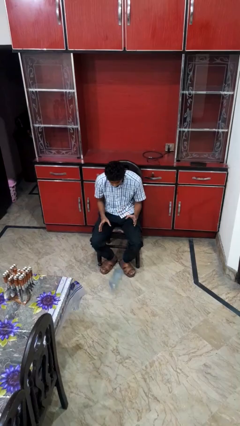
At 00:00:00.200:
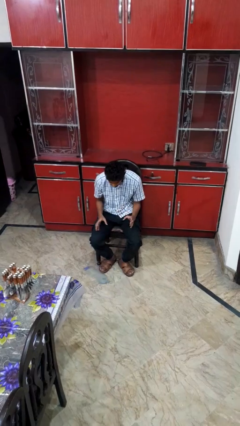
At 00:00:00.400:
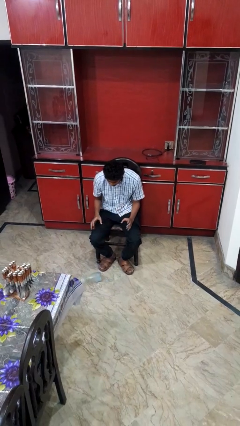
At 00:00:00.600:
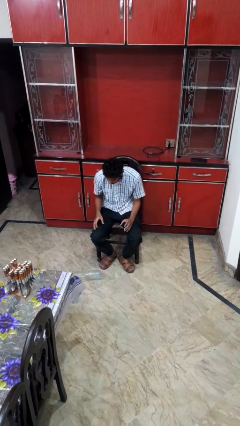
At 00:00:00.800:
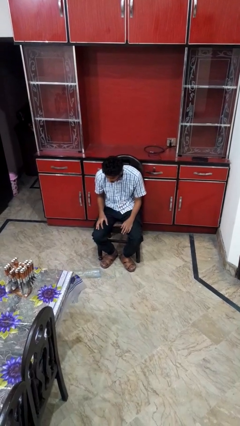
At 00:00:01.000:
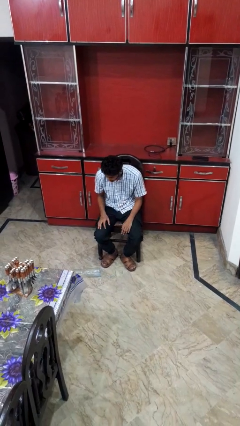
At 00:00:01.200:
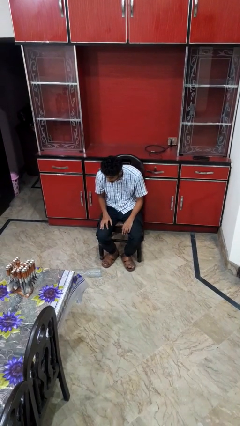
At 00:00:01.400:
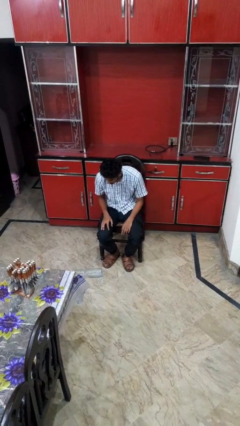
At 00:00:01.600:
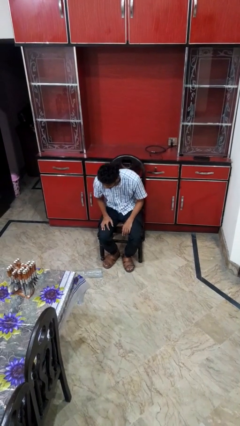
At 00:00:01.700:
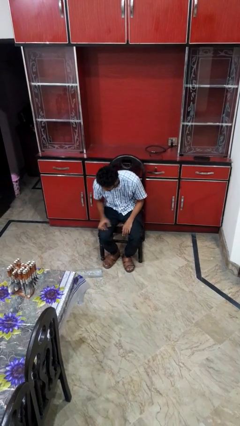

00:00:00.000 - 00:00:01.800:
person drops object

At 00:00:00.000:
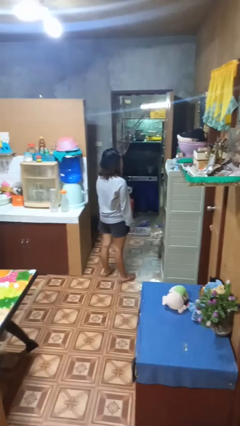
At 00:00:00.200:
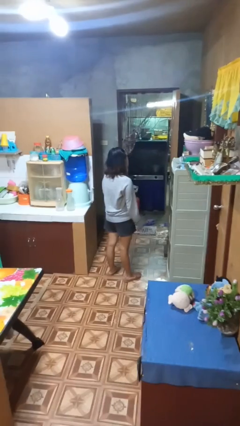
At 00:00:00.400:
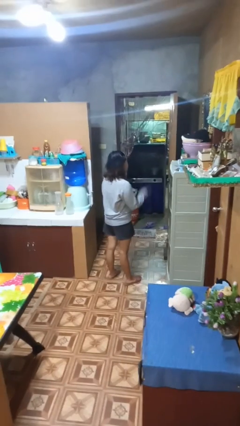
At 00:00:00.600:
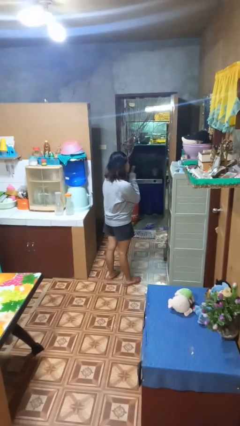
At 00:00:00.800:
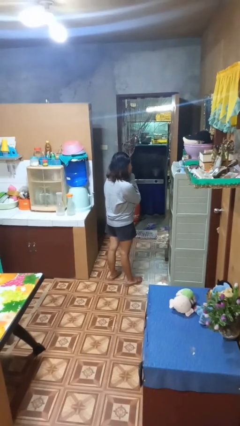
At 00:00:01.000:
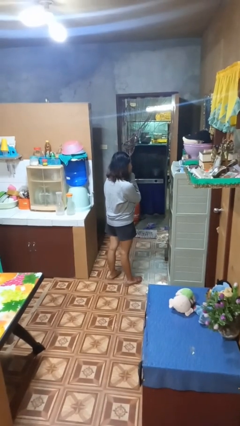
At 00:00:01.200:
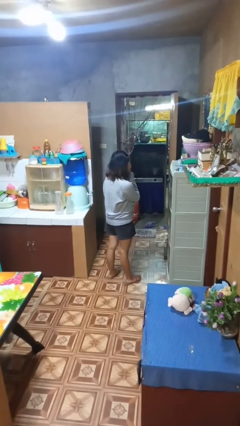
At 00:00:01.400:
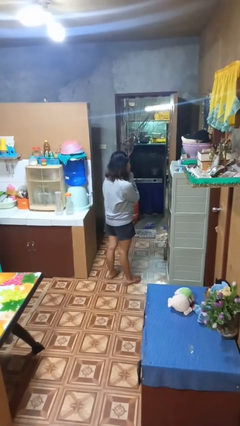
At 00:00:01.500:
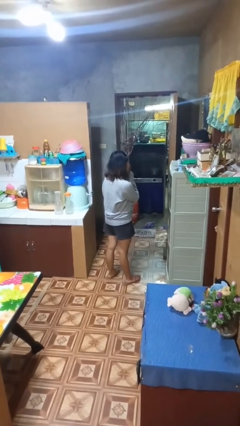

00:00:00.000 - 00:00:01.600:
person gestures be quiet

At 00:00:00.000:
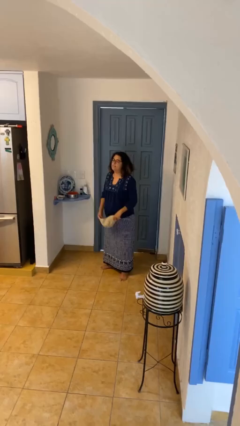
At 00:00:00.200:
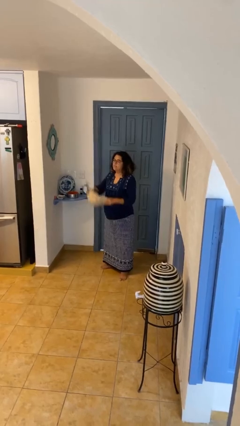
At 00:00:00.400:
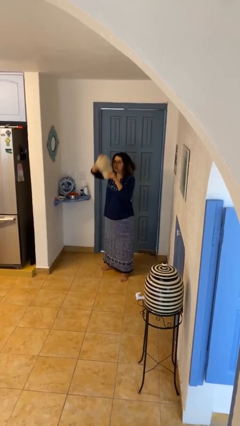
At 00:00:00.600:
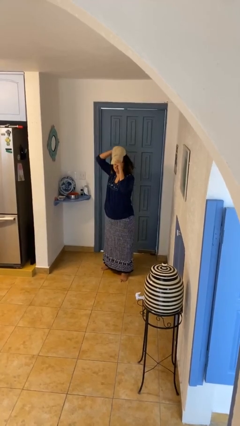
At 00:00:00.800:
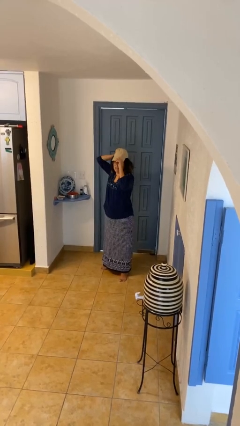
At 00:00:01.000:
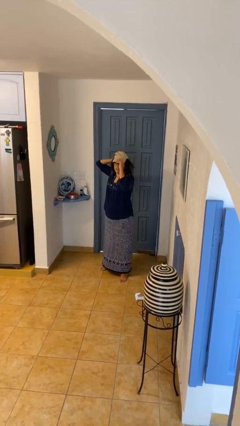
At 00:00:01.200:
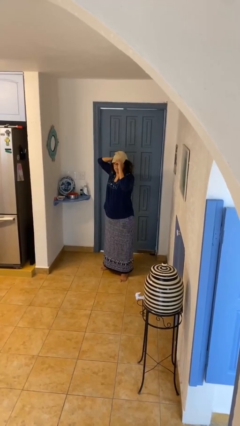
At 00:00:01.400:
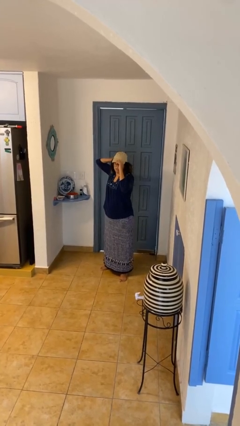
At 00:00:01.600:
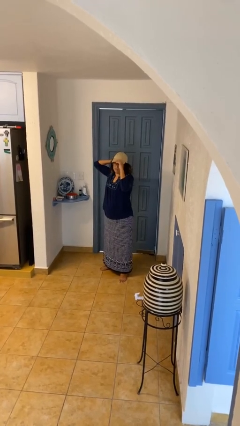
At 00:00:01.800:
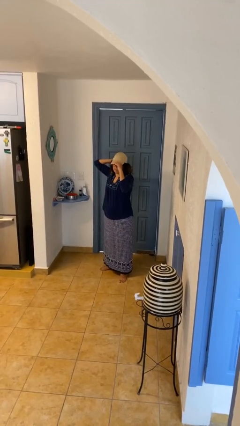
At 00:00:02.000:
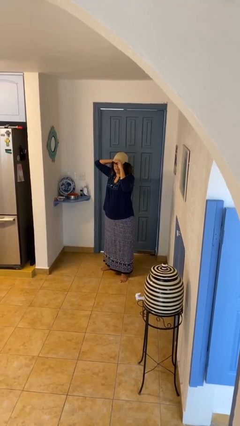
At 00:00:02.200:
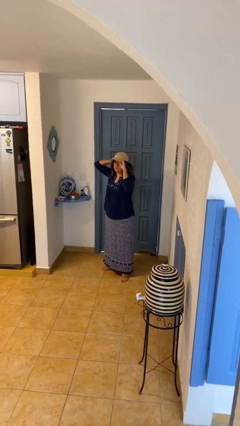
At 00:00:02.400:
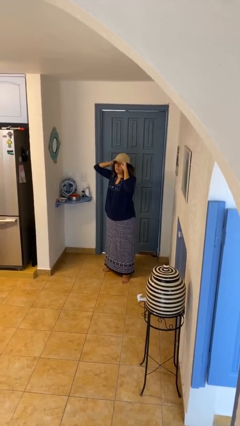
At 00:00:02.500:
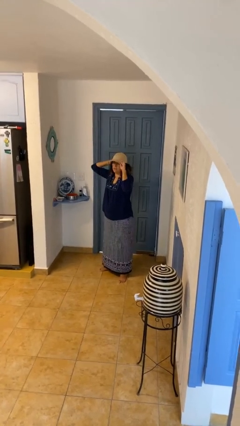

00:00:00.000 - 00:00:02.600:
person puts on hat

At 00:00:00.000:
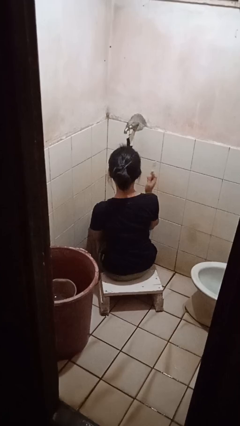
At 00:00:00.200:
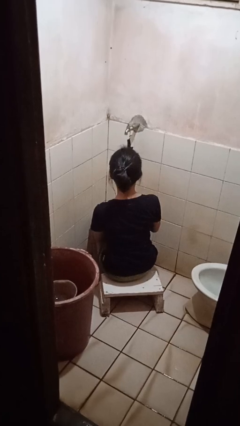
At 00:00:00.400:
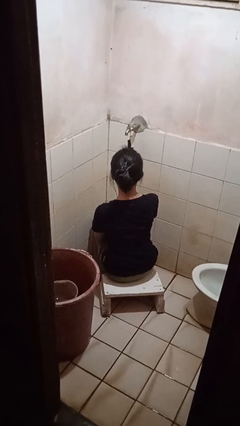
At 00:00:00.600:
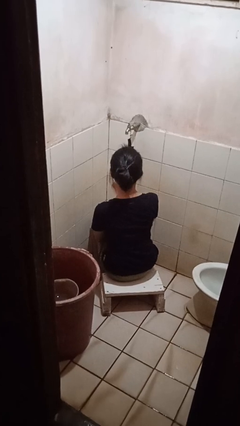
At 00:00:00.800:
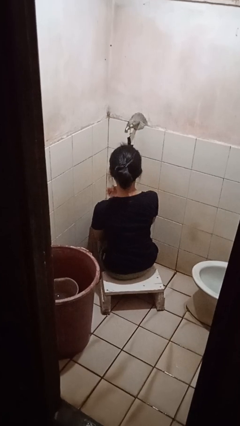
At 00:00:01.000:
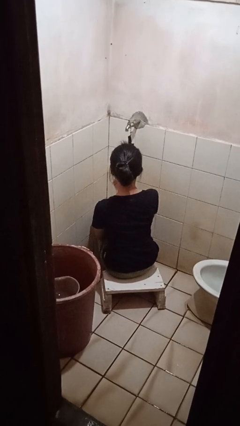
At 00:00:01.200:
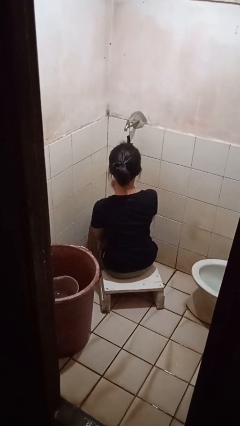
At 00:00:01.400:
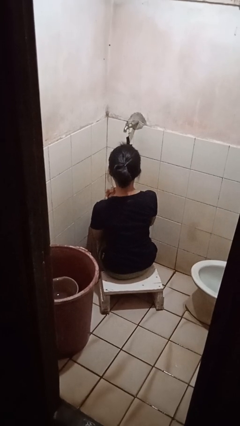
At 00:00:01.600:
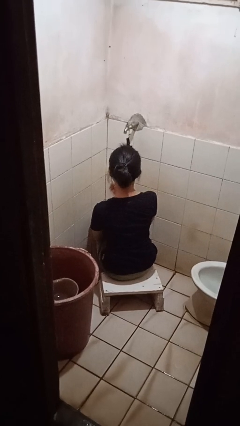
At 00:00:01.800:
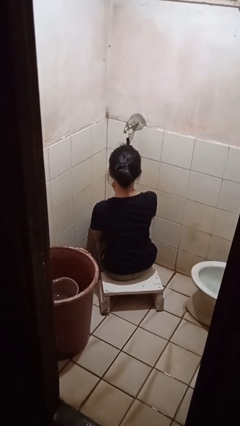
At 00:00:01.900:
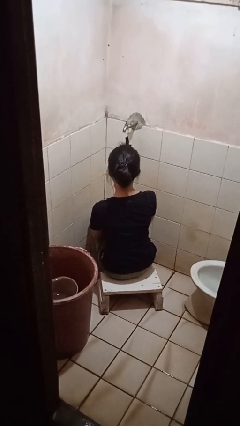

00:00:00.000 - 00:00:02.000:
person brushes teeth

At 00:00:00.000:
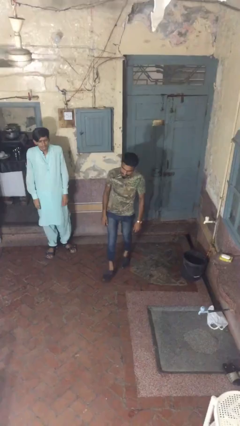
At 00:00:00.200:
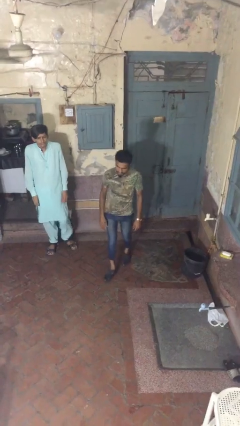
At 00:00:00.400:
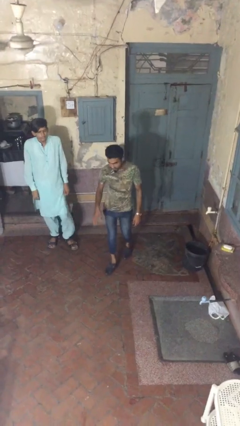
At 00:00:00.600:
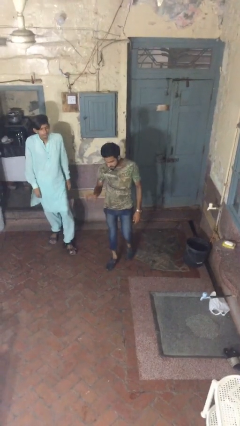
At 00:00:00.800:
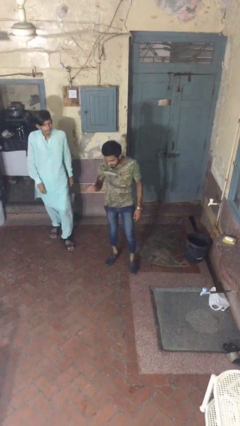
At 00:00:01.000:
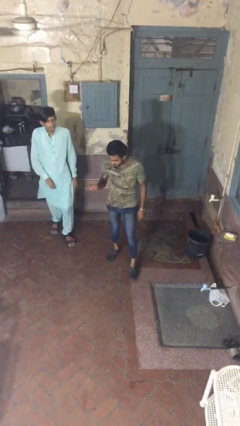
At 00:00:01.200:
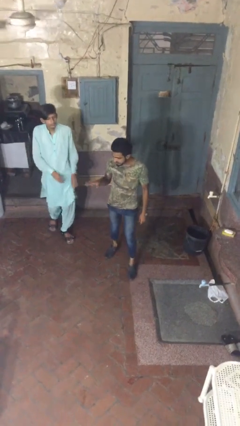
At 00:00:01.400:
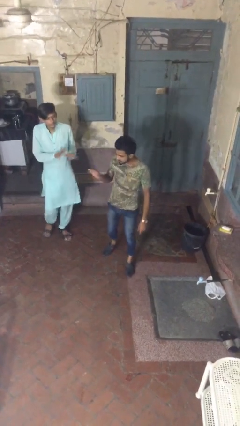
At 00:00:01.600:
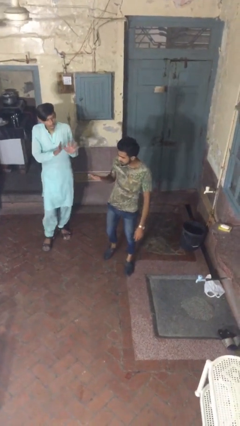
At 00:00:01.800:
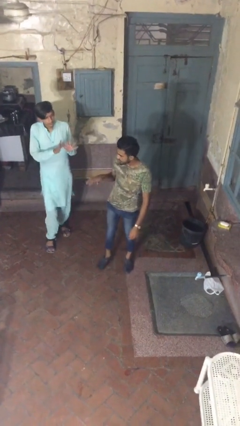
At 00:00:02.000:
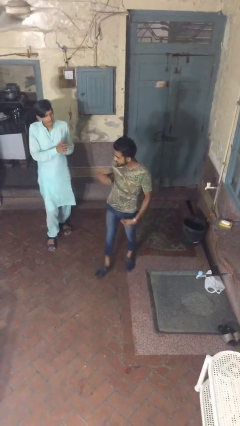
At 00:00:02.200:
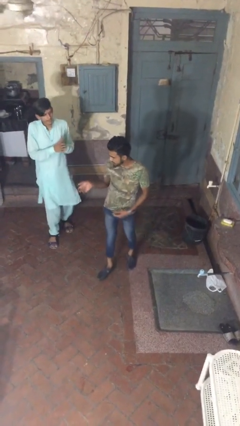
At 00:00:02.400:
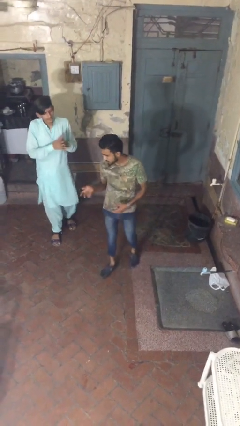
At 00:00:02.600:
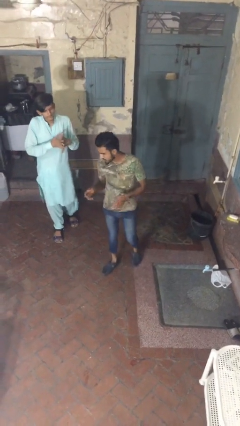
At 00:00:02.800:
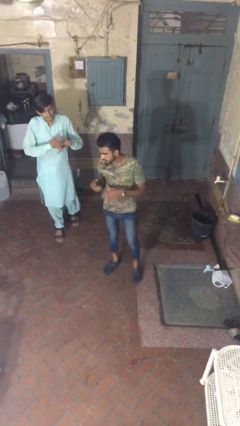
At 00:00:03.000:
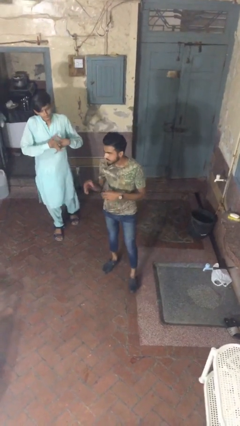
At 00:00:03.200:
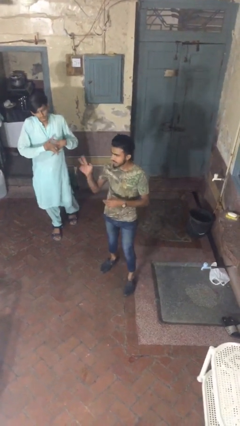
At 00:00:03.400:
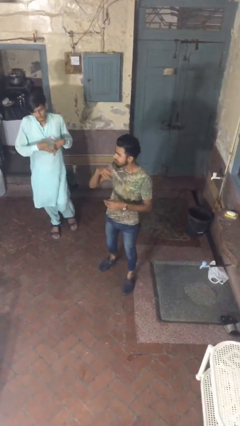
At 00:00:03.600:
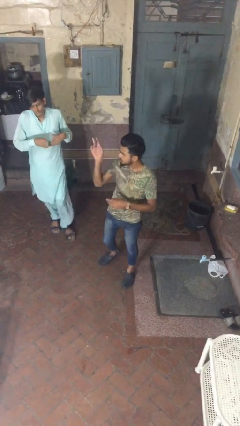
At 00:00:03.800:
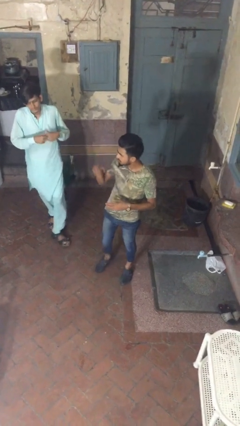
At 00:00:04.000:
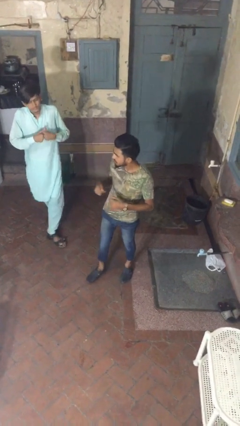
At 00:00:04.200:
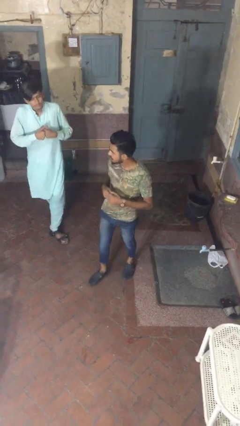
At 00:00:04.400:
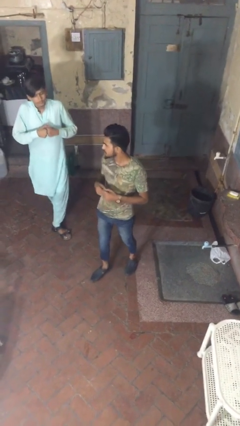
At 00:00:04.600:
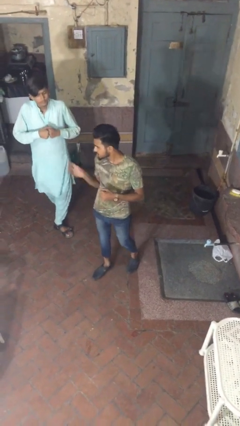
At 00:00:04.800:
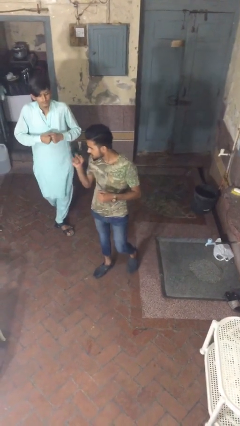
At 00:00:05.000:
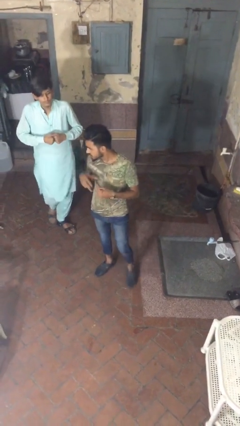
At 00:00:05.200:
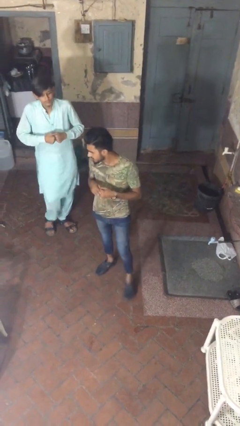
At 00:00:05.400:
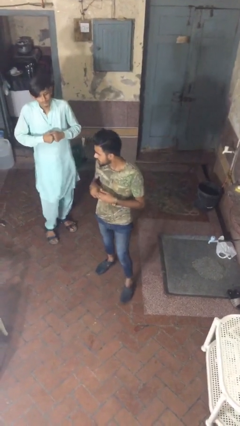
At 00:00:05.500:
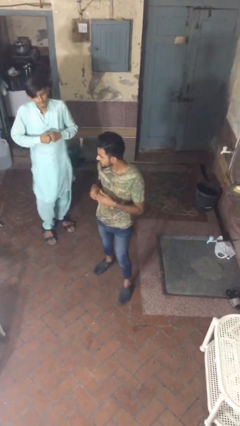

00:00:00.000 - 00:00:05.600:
person talks to person

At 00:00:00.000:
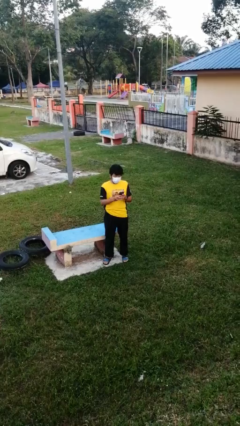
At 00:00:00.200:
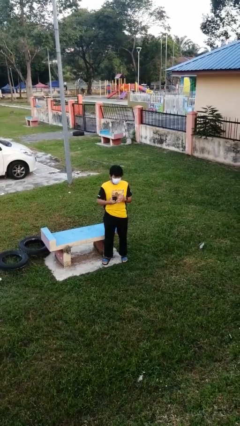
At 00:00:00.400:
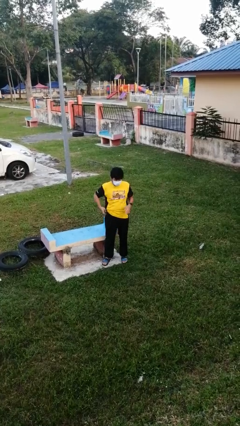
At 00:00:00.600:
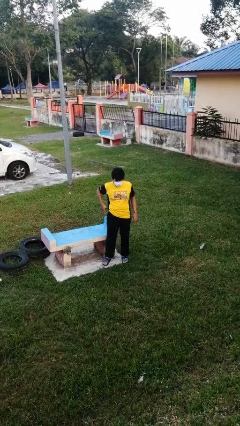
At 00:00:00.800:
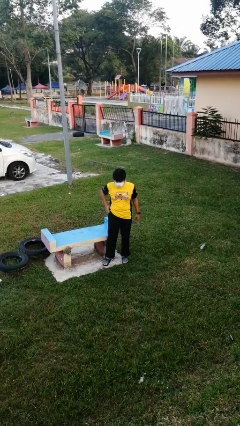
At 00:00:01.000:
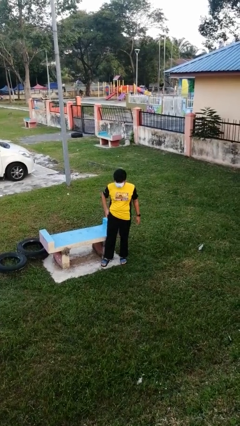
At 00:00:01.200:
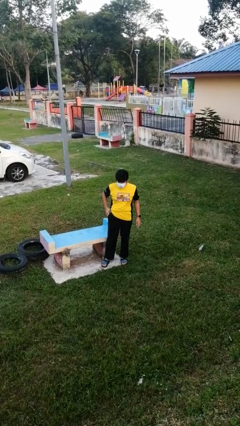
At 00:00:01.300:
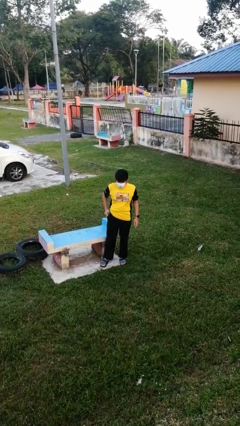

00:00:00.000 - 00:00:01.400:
person puts phone into pocket

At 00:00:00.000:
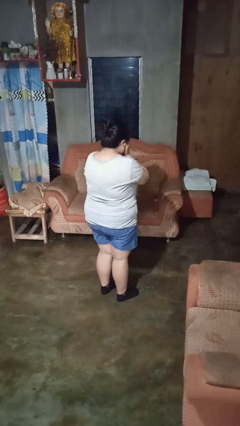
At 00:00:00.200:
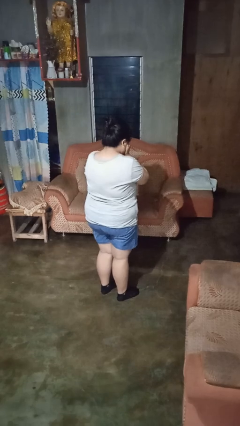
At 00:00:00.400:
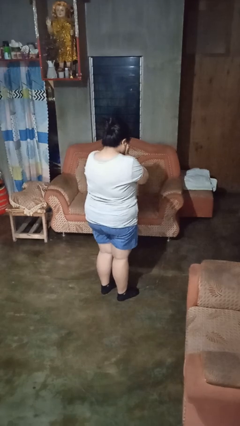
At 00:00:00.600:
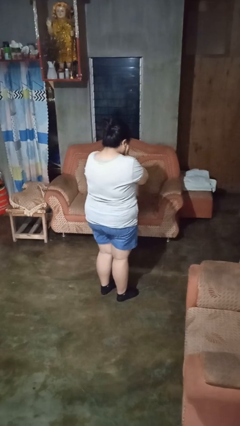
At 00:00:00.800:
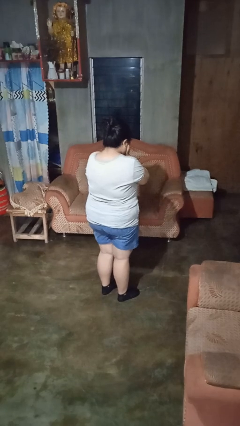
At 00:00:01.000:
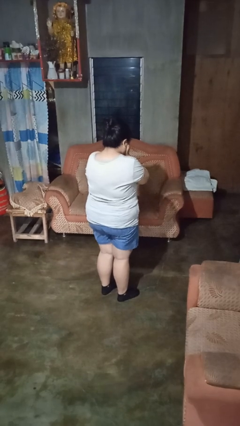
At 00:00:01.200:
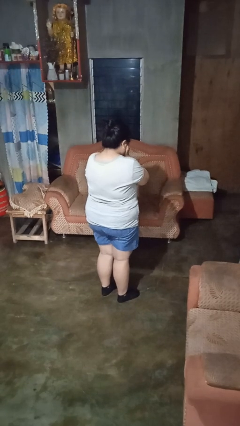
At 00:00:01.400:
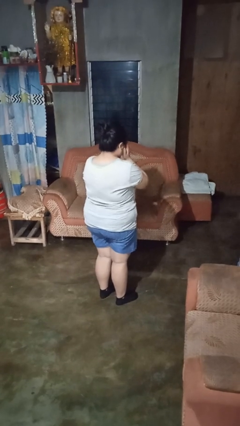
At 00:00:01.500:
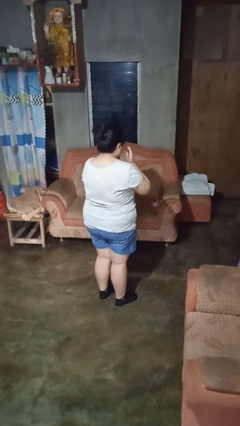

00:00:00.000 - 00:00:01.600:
person covers face with hands

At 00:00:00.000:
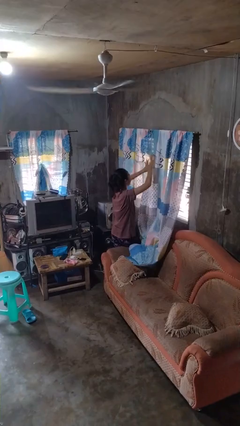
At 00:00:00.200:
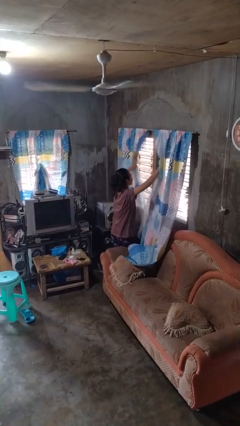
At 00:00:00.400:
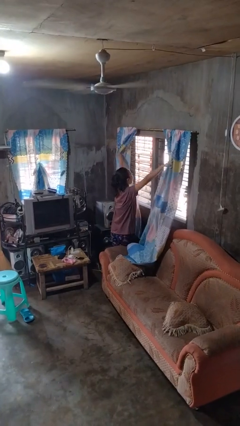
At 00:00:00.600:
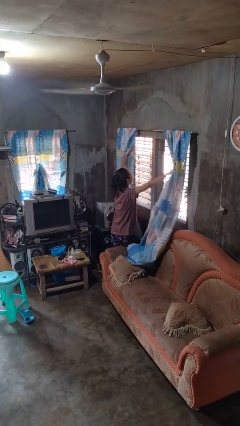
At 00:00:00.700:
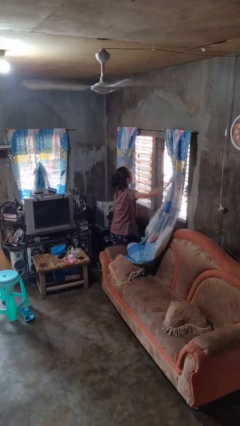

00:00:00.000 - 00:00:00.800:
person opens curtains
